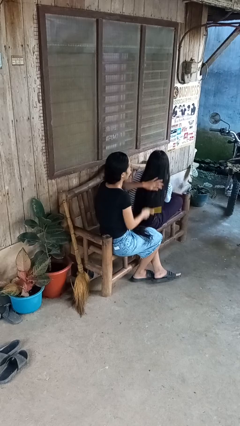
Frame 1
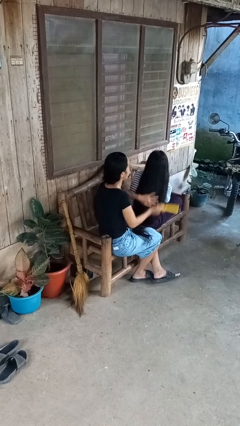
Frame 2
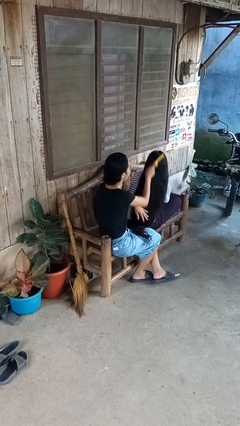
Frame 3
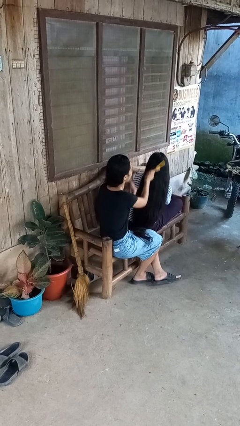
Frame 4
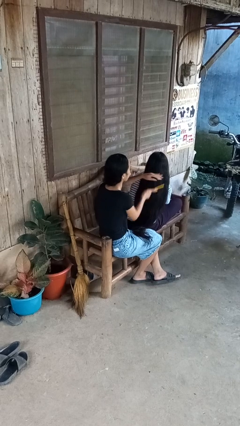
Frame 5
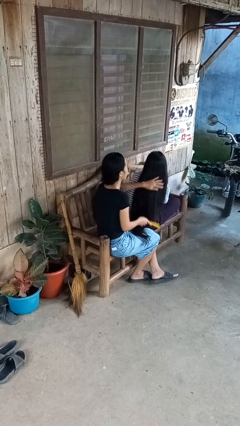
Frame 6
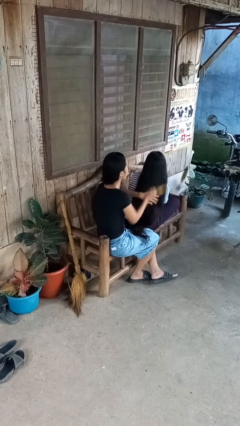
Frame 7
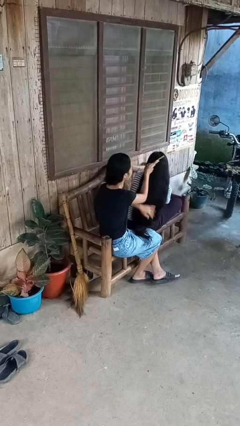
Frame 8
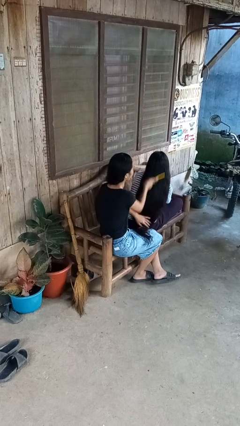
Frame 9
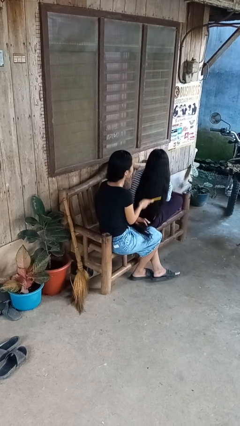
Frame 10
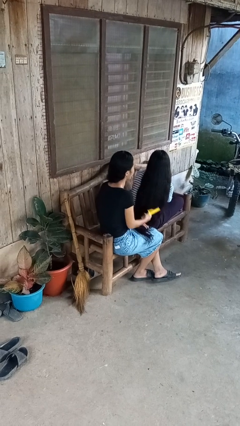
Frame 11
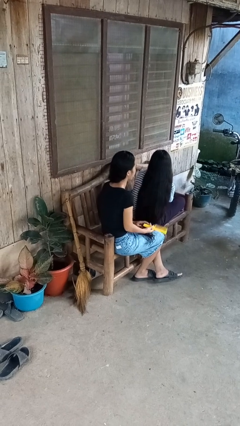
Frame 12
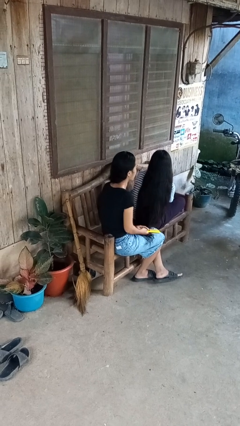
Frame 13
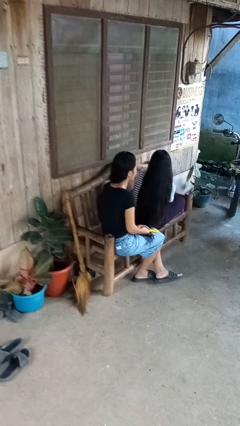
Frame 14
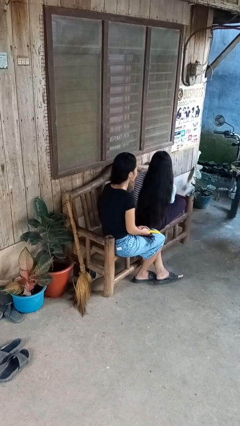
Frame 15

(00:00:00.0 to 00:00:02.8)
person brushes hair of person

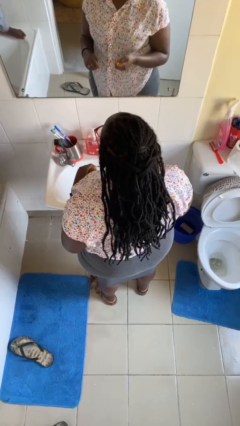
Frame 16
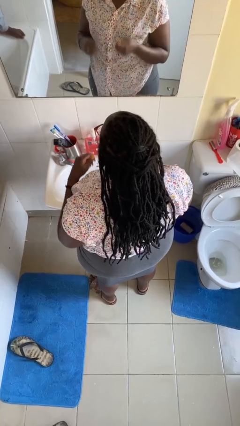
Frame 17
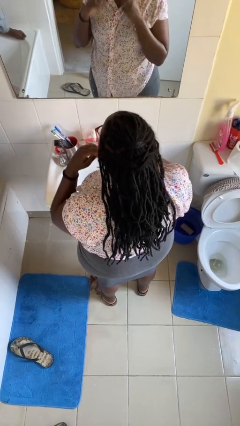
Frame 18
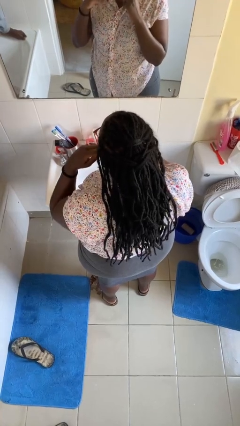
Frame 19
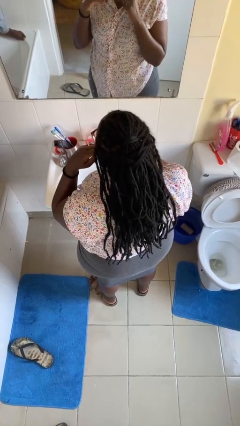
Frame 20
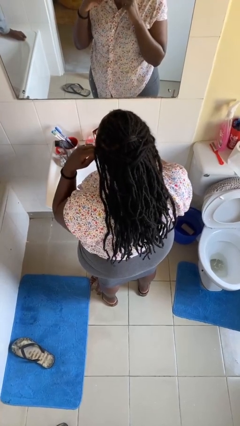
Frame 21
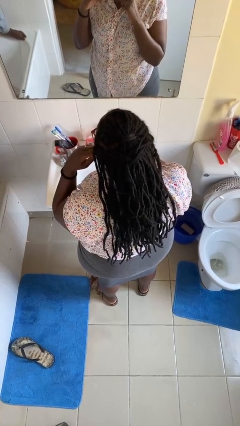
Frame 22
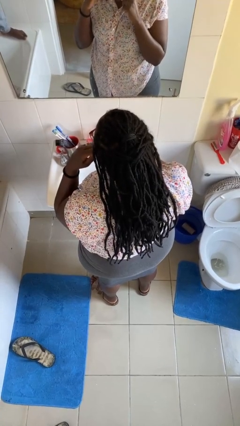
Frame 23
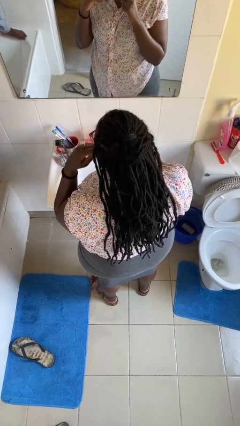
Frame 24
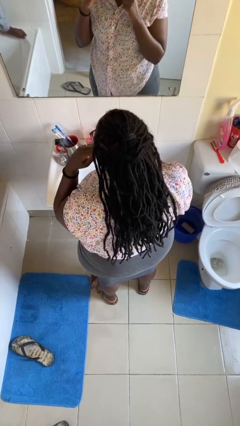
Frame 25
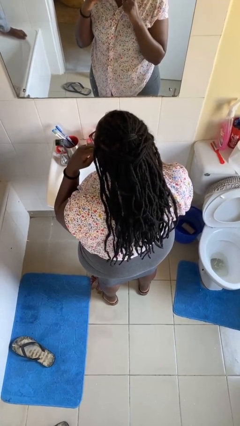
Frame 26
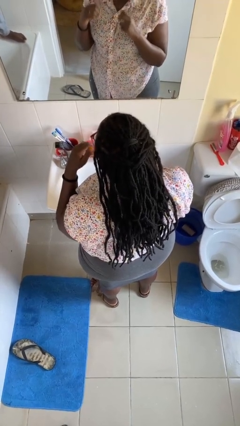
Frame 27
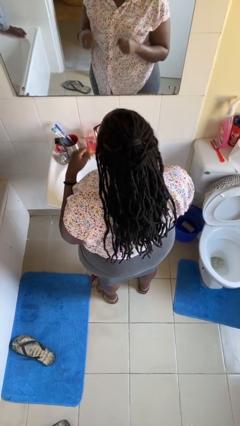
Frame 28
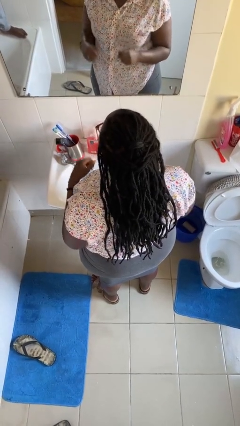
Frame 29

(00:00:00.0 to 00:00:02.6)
person flosses

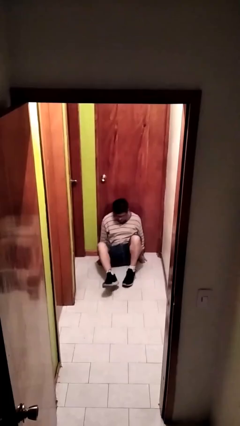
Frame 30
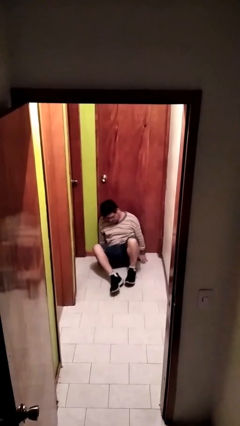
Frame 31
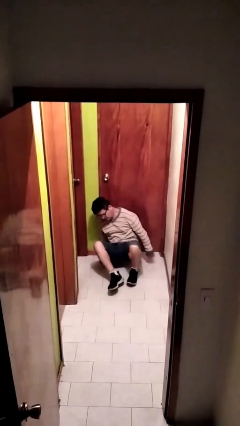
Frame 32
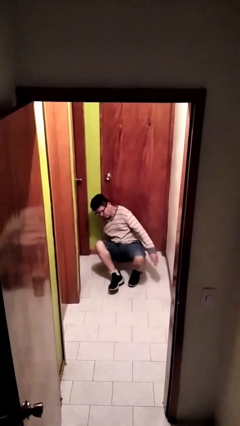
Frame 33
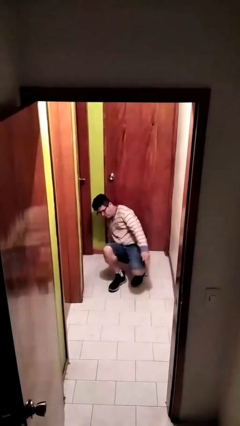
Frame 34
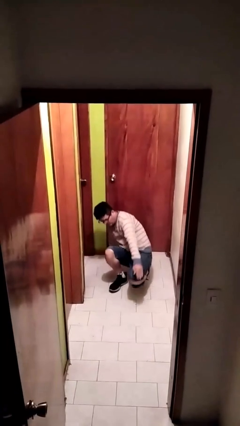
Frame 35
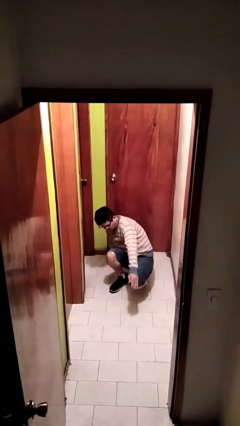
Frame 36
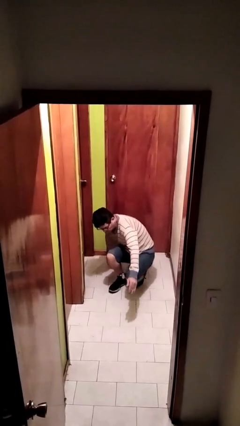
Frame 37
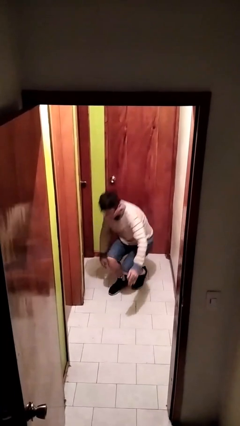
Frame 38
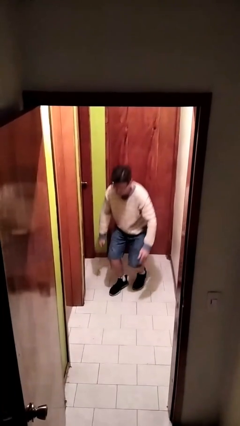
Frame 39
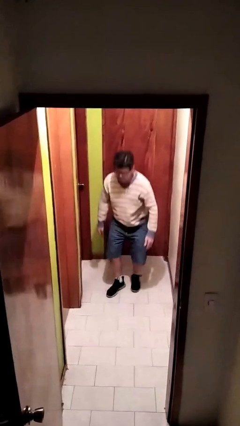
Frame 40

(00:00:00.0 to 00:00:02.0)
person stands up

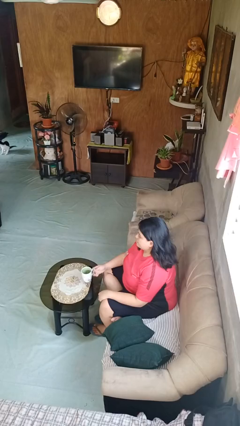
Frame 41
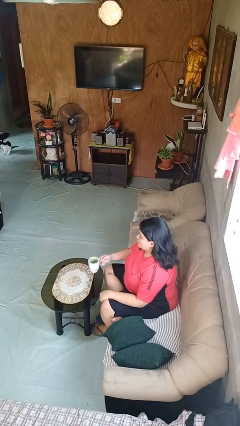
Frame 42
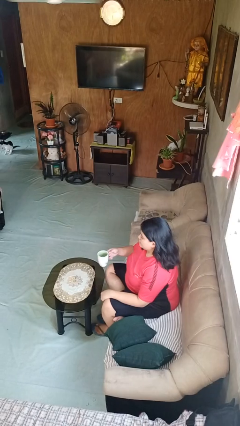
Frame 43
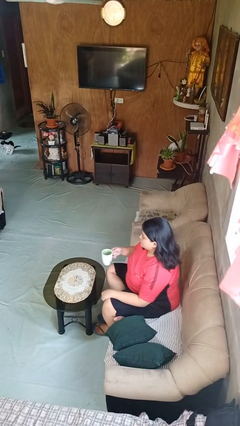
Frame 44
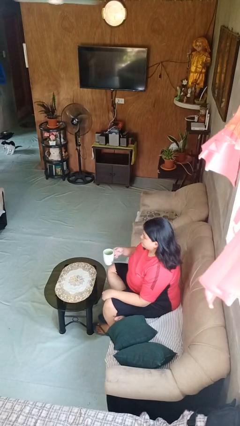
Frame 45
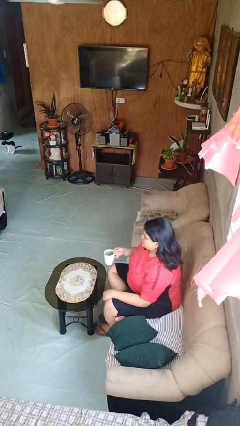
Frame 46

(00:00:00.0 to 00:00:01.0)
person picks up object from table

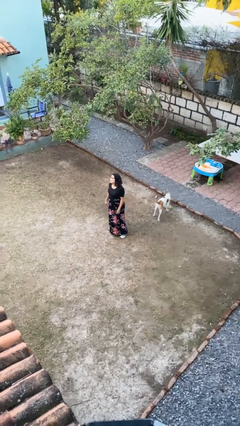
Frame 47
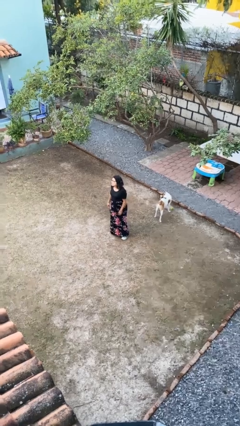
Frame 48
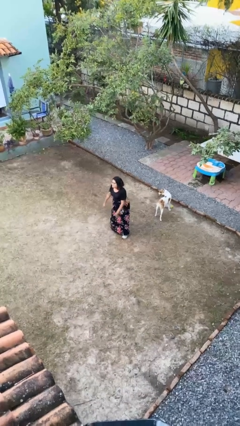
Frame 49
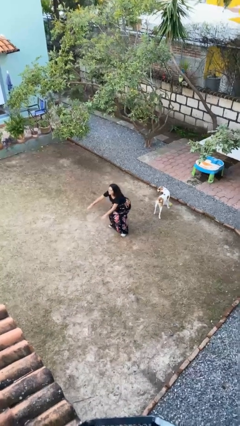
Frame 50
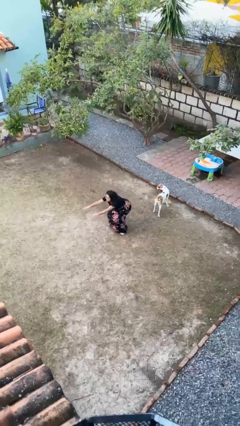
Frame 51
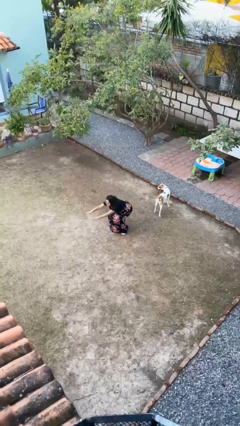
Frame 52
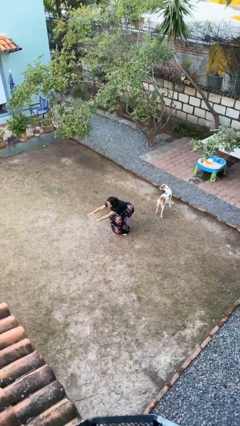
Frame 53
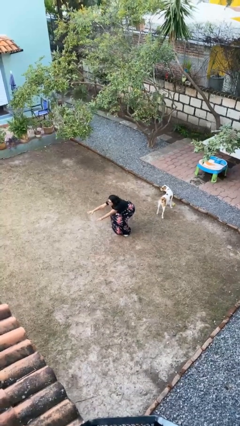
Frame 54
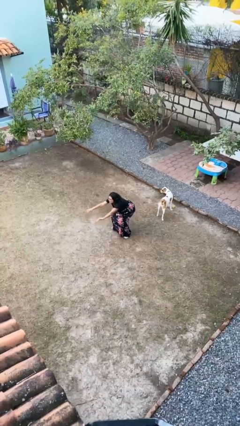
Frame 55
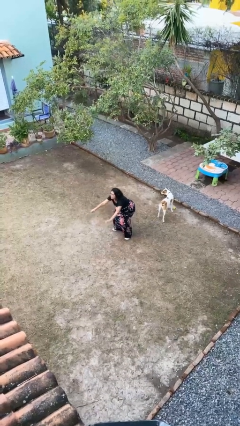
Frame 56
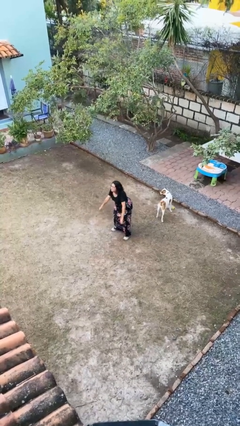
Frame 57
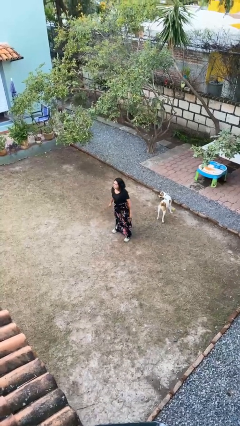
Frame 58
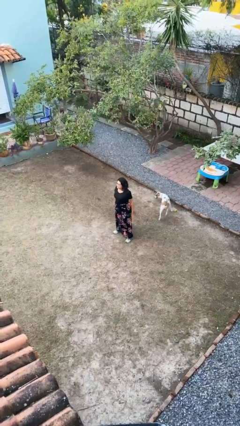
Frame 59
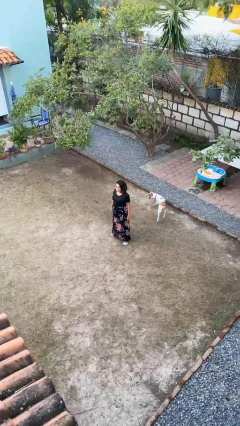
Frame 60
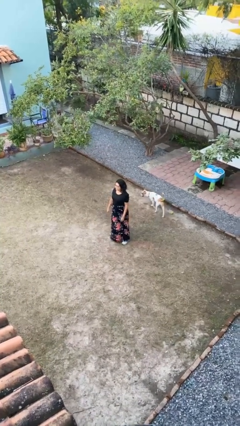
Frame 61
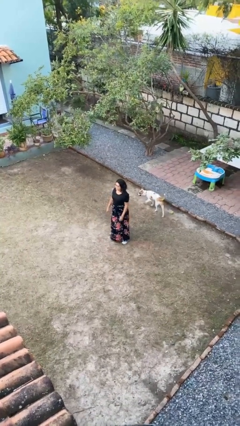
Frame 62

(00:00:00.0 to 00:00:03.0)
person exercises with situp

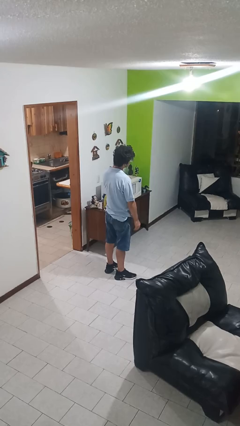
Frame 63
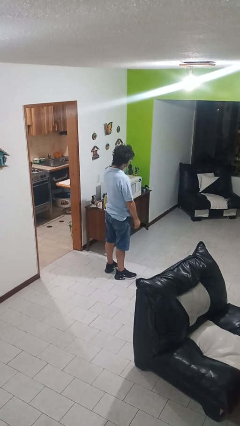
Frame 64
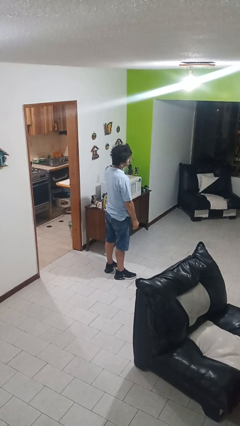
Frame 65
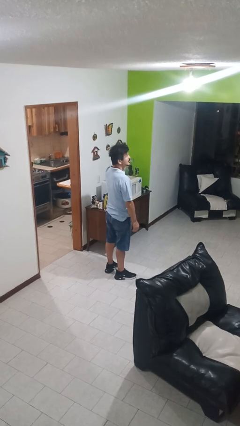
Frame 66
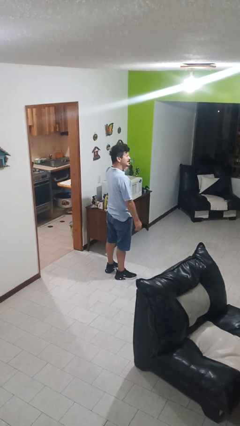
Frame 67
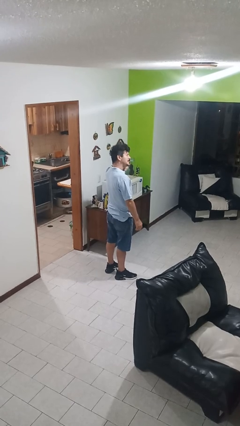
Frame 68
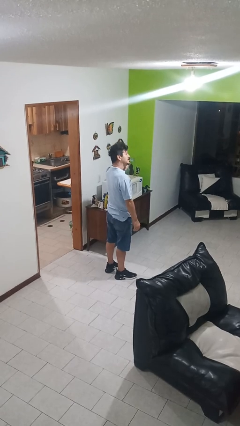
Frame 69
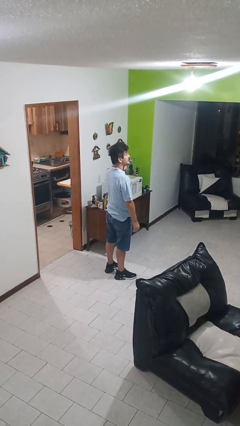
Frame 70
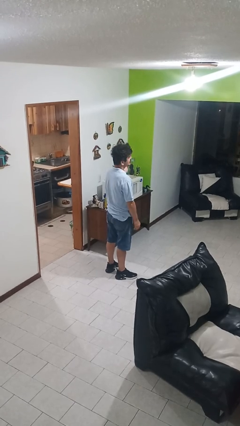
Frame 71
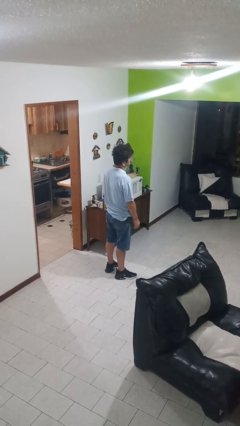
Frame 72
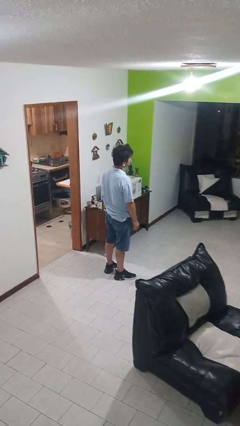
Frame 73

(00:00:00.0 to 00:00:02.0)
person rubs neck

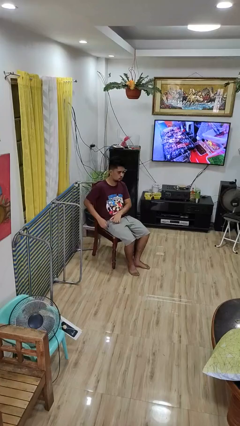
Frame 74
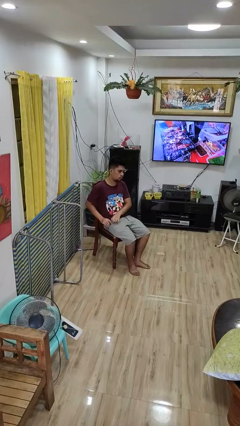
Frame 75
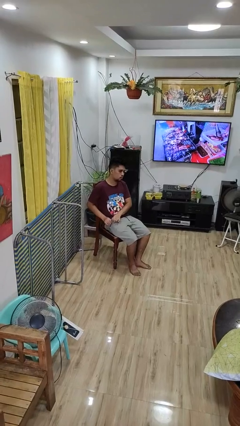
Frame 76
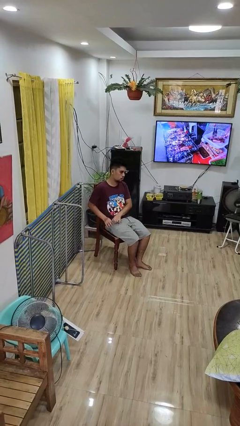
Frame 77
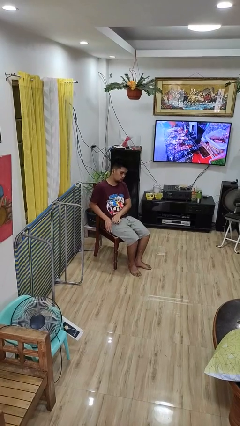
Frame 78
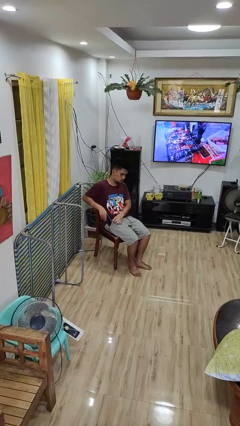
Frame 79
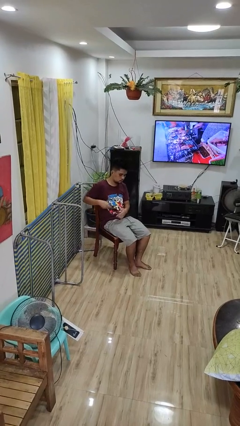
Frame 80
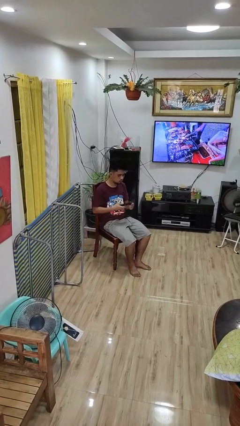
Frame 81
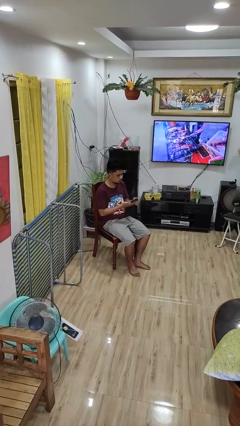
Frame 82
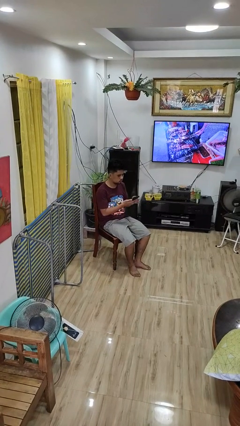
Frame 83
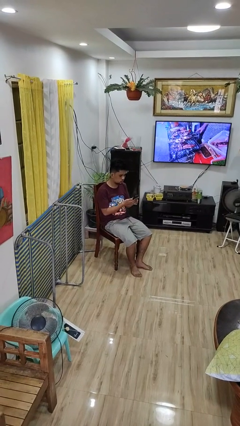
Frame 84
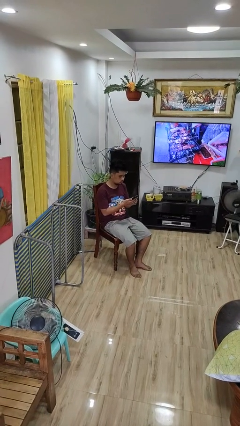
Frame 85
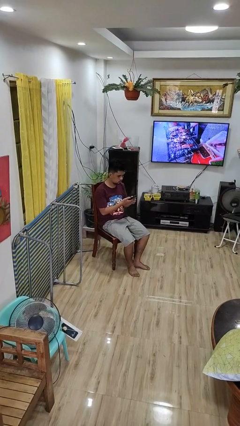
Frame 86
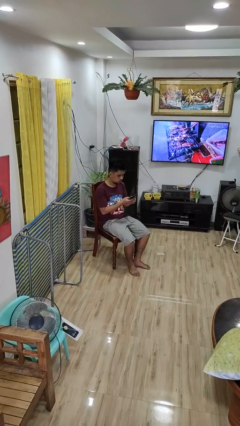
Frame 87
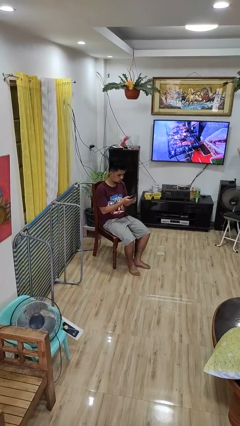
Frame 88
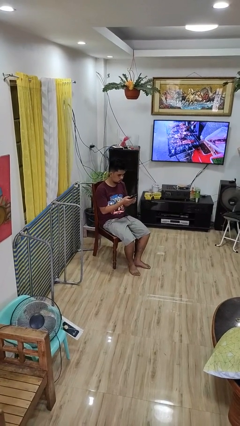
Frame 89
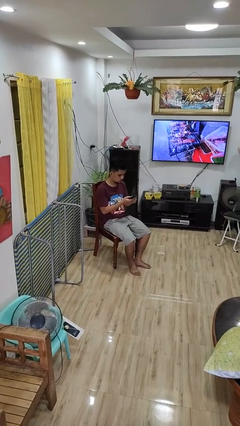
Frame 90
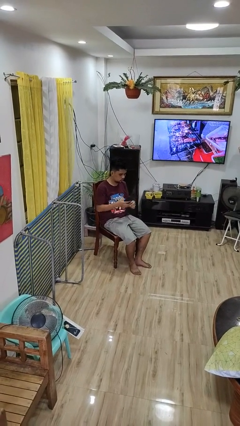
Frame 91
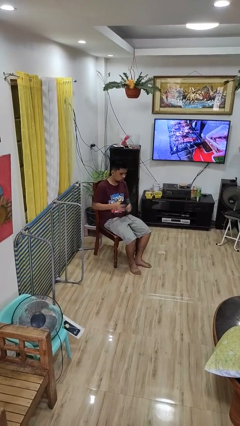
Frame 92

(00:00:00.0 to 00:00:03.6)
person takes phone from pocket
